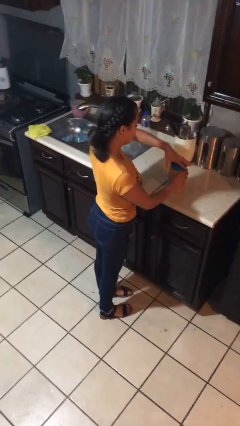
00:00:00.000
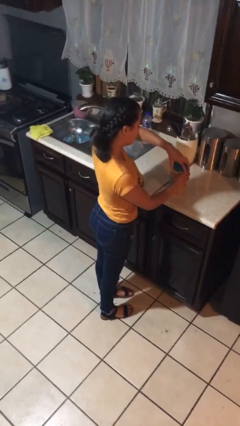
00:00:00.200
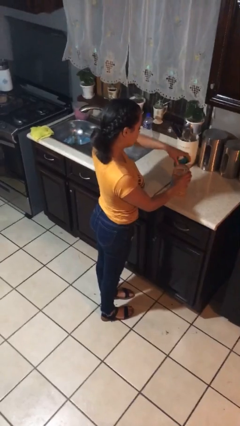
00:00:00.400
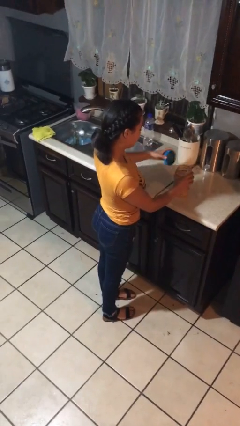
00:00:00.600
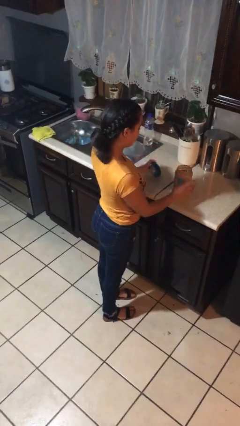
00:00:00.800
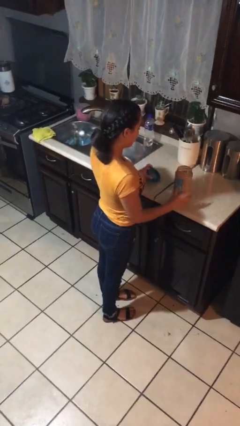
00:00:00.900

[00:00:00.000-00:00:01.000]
person opens jar

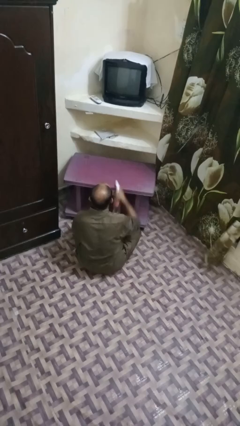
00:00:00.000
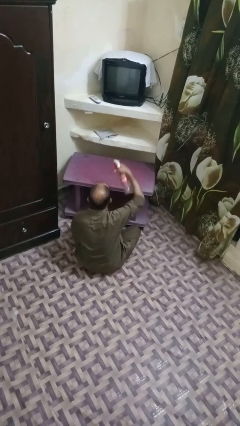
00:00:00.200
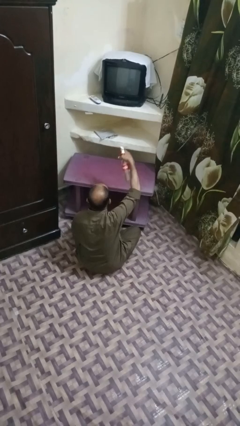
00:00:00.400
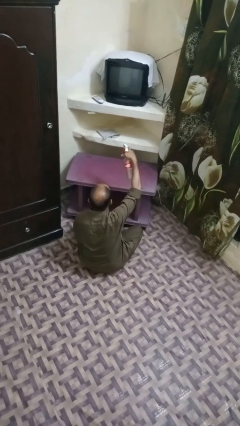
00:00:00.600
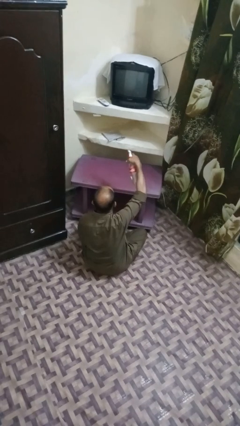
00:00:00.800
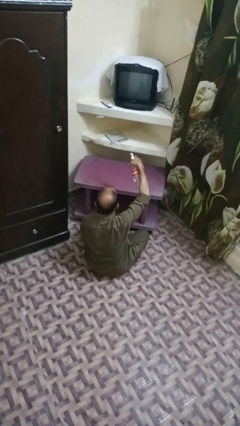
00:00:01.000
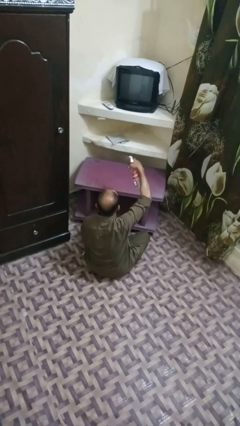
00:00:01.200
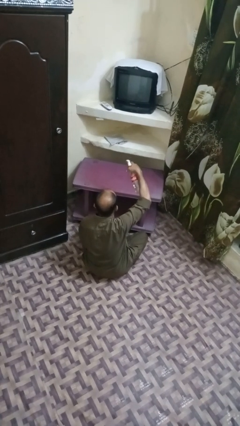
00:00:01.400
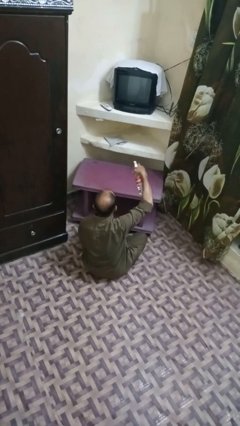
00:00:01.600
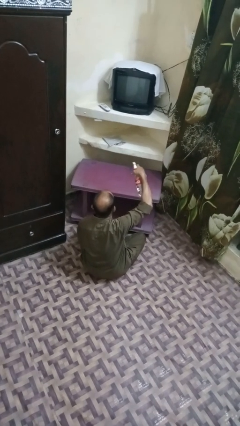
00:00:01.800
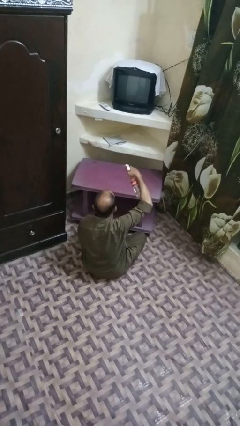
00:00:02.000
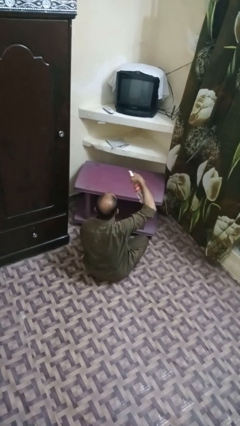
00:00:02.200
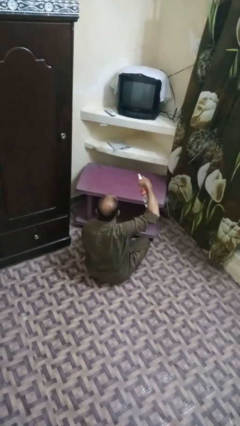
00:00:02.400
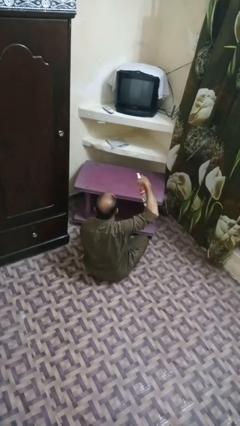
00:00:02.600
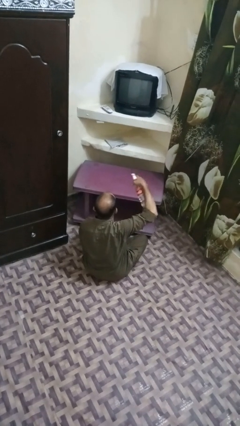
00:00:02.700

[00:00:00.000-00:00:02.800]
person sprays from bottle

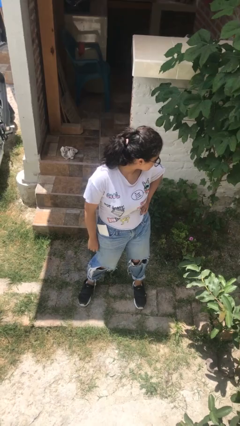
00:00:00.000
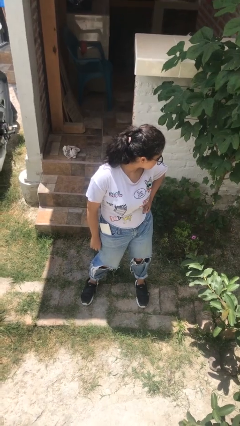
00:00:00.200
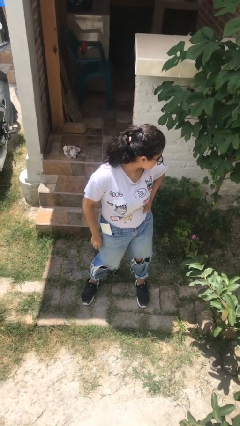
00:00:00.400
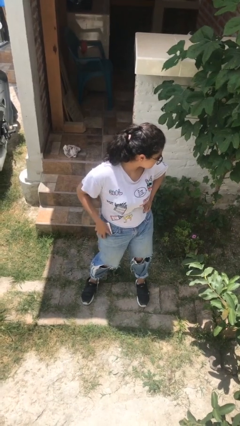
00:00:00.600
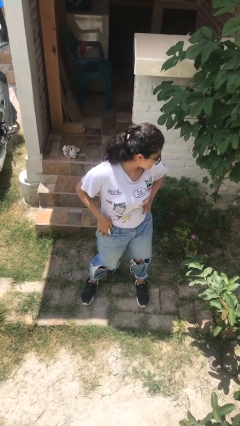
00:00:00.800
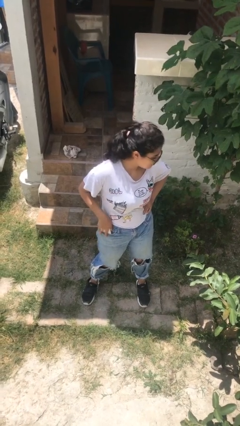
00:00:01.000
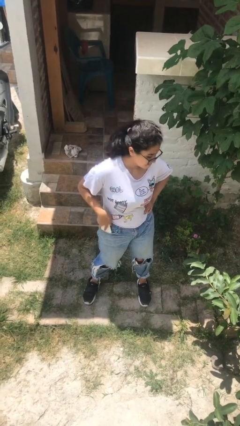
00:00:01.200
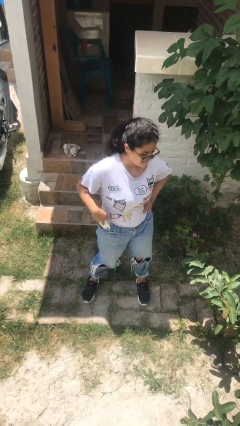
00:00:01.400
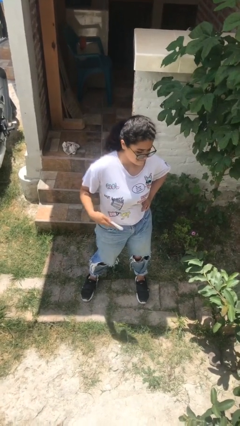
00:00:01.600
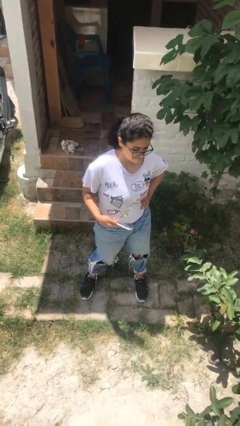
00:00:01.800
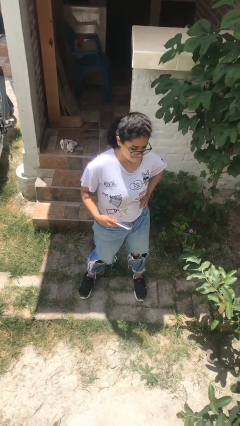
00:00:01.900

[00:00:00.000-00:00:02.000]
person takes phone from pocket

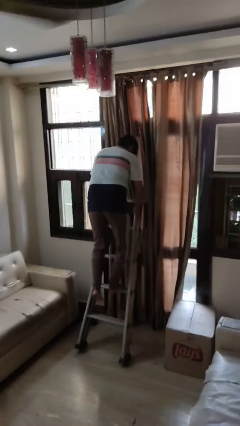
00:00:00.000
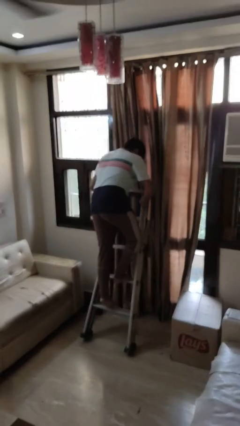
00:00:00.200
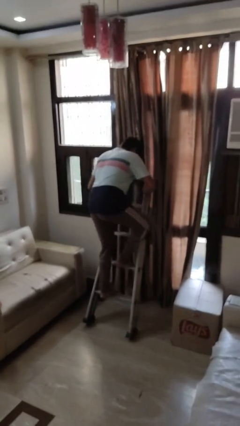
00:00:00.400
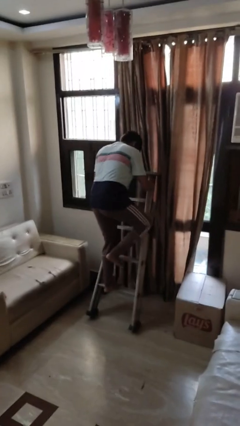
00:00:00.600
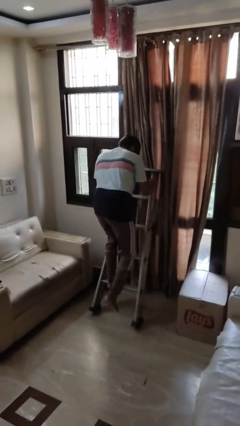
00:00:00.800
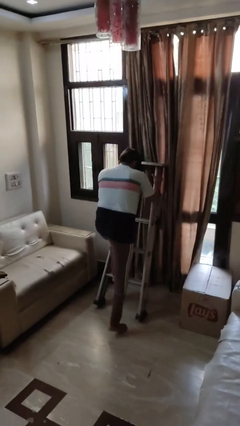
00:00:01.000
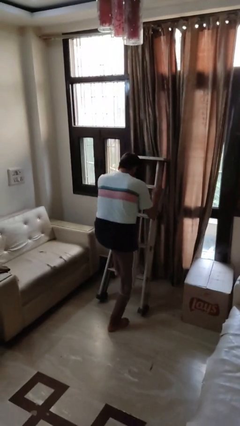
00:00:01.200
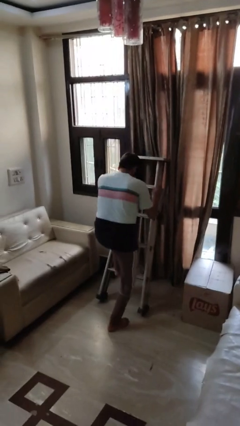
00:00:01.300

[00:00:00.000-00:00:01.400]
person climbs down ladder

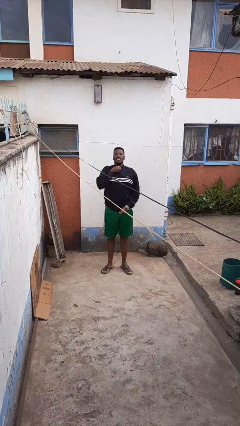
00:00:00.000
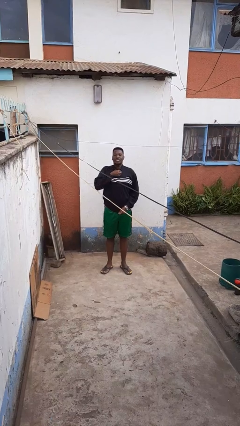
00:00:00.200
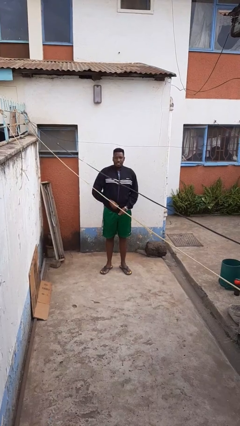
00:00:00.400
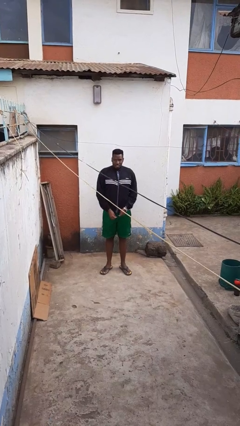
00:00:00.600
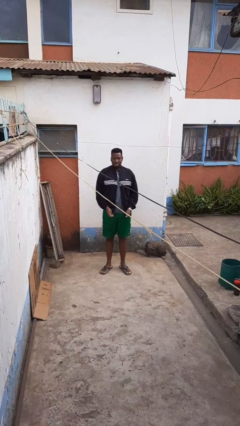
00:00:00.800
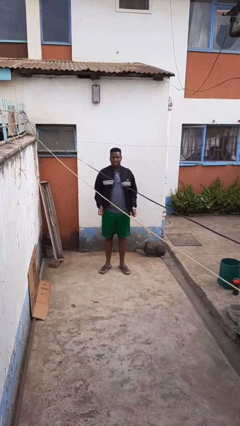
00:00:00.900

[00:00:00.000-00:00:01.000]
person unzips jacket

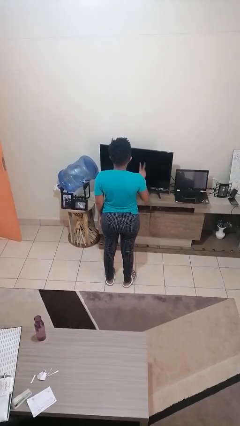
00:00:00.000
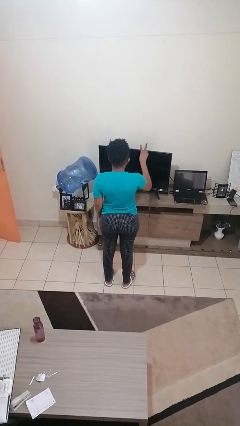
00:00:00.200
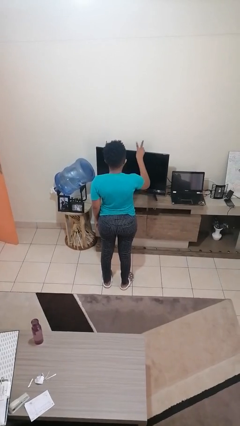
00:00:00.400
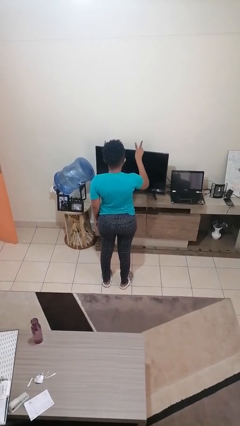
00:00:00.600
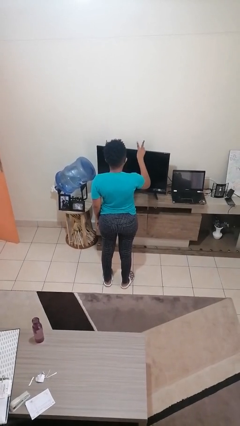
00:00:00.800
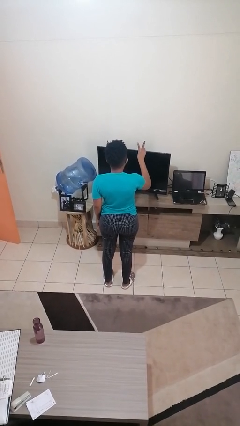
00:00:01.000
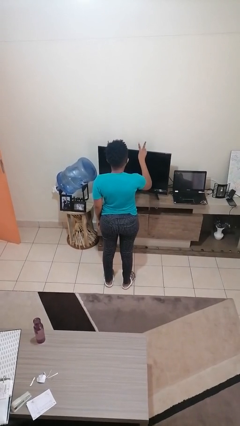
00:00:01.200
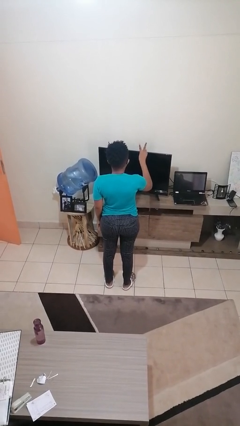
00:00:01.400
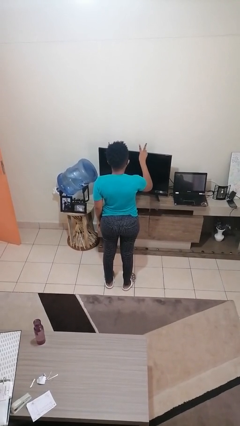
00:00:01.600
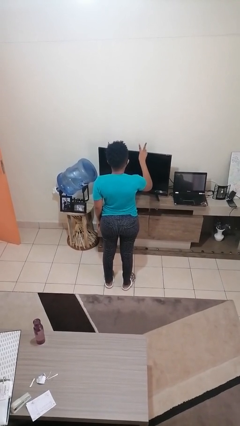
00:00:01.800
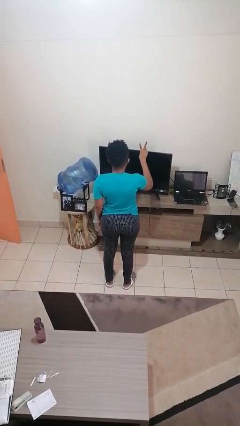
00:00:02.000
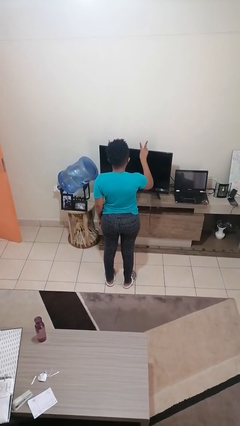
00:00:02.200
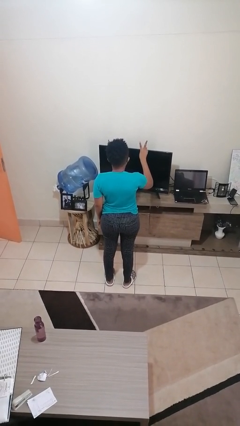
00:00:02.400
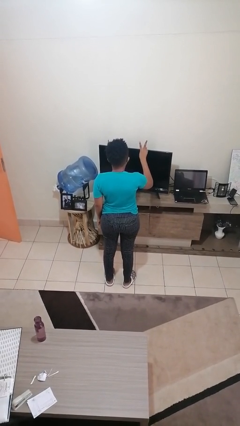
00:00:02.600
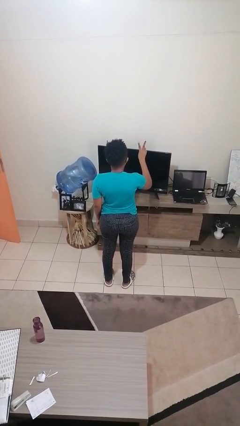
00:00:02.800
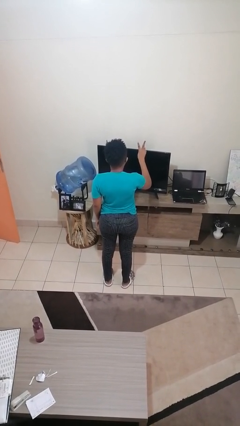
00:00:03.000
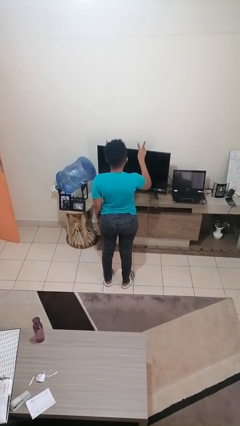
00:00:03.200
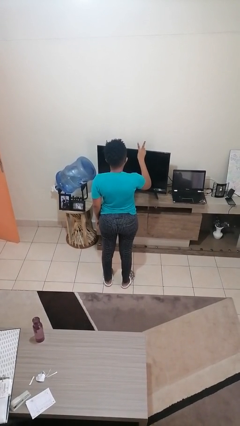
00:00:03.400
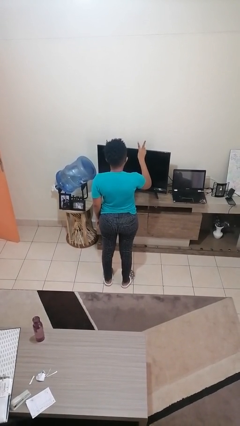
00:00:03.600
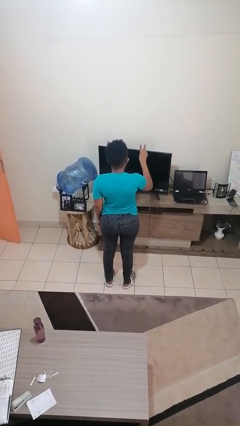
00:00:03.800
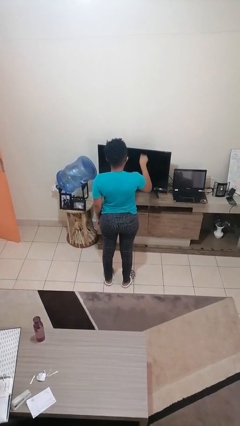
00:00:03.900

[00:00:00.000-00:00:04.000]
person gestures peace

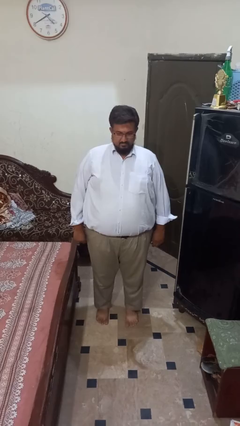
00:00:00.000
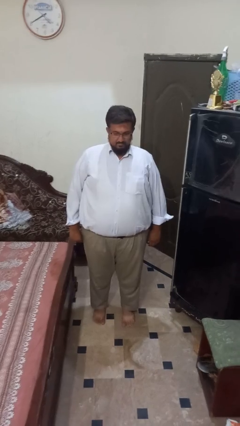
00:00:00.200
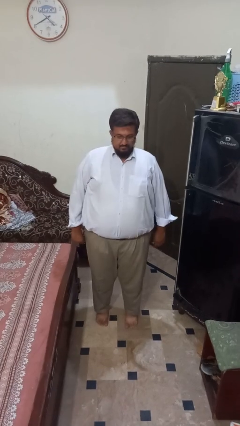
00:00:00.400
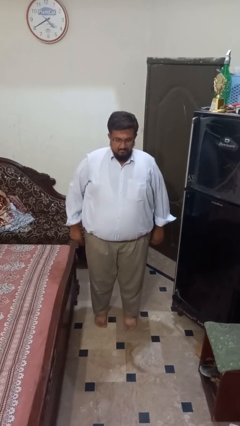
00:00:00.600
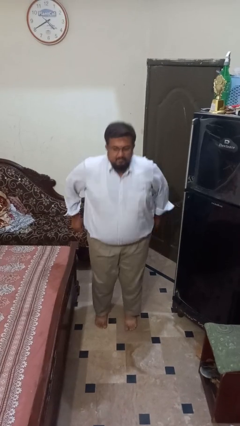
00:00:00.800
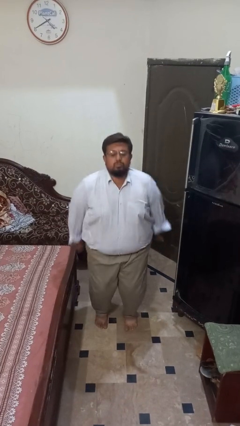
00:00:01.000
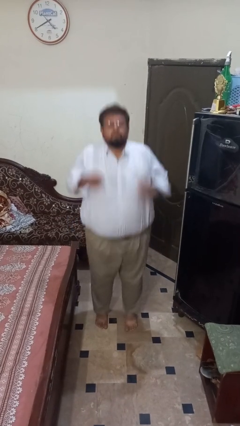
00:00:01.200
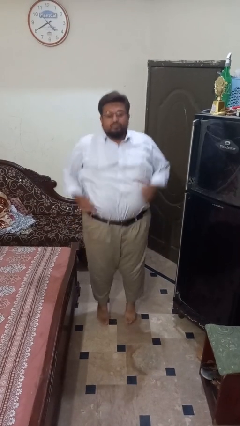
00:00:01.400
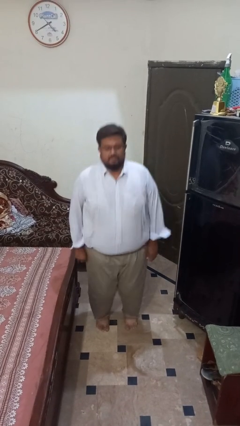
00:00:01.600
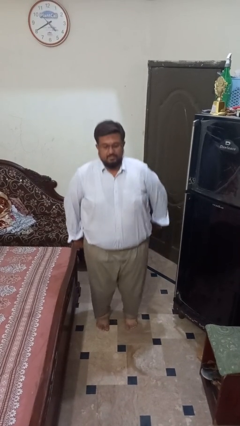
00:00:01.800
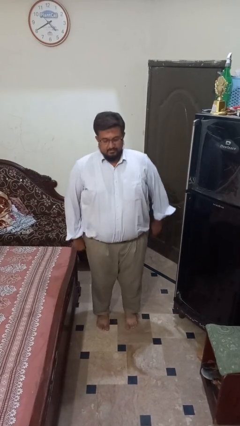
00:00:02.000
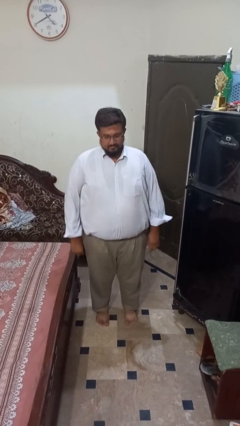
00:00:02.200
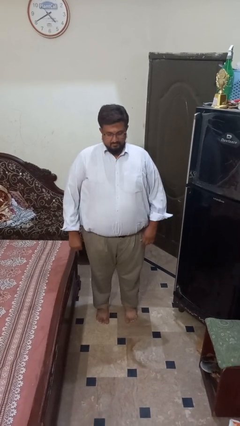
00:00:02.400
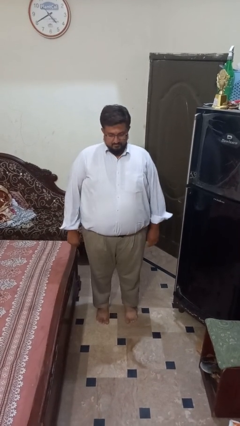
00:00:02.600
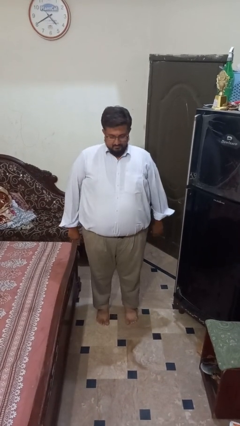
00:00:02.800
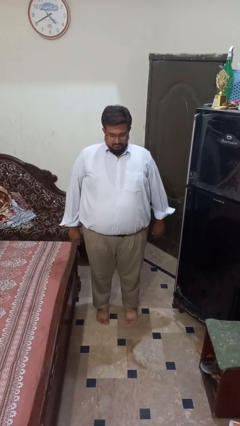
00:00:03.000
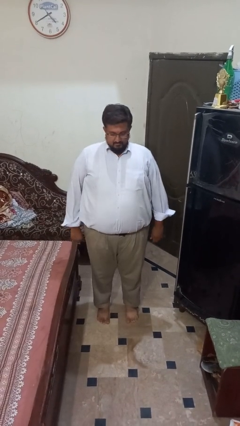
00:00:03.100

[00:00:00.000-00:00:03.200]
person jumps

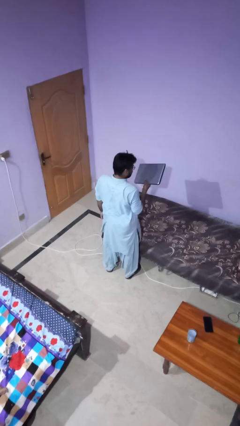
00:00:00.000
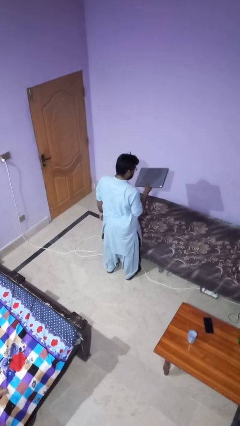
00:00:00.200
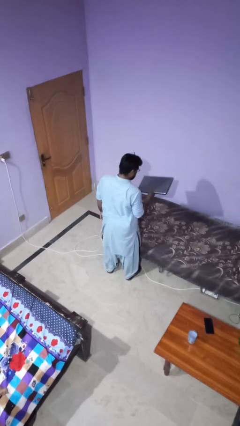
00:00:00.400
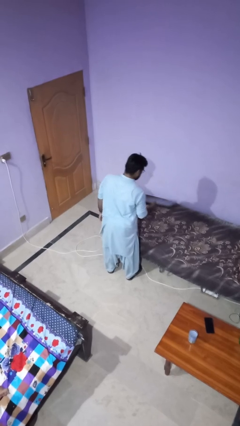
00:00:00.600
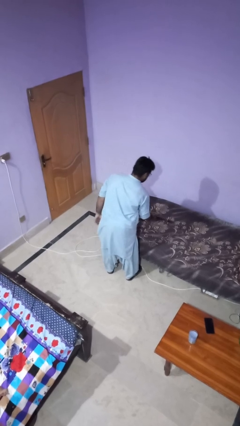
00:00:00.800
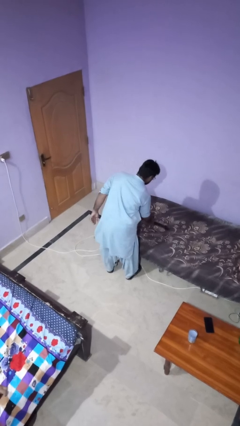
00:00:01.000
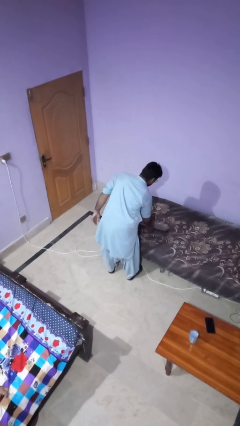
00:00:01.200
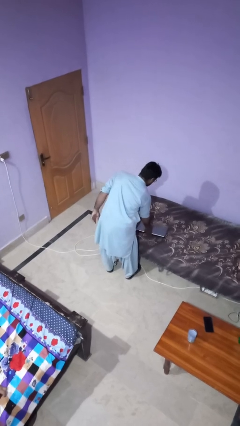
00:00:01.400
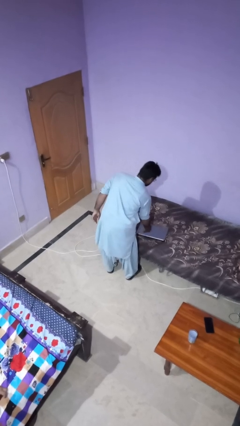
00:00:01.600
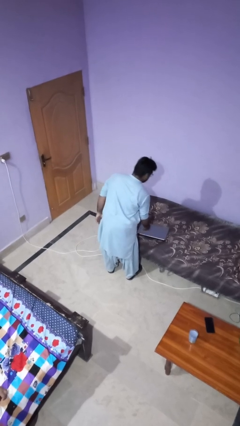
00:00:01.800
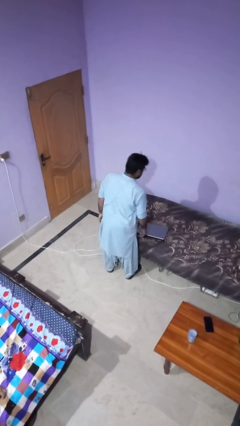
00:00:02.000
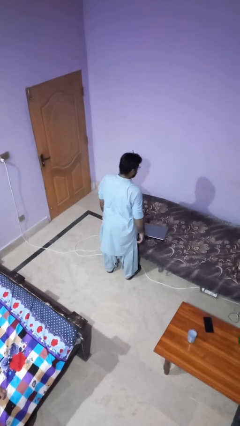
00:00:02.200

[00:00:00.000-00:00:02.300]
person puts down object on bed
